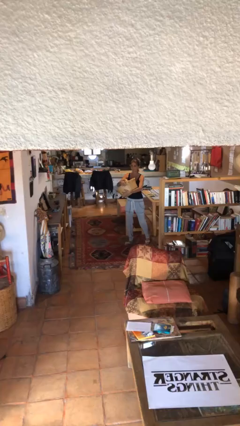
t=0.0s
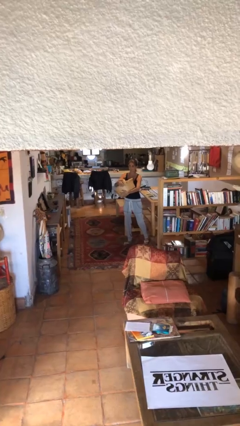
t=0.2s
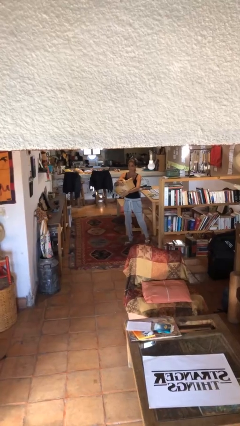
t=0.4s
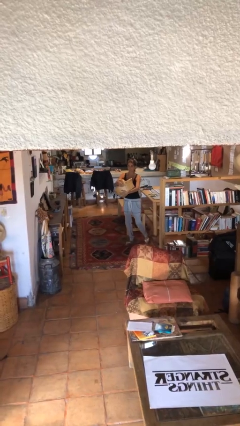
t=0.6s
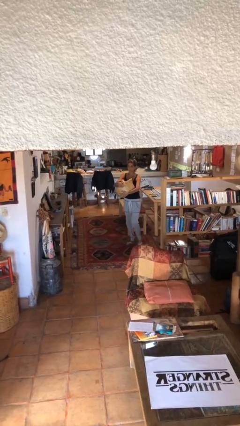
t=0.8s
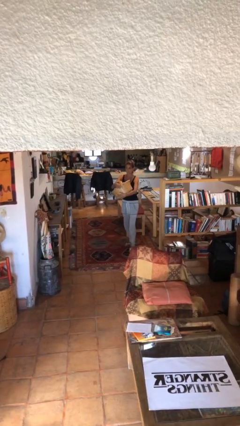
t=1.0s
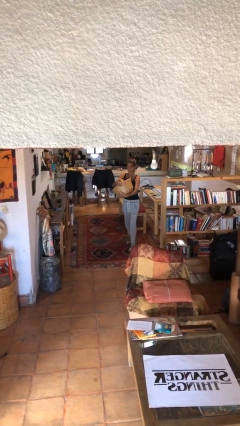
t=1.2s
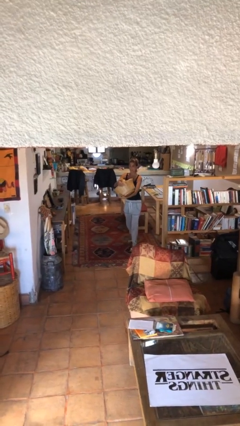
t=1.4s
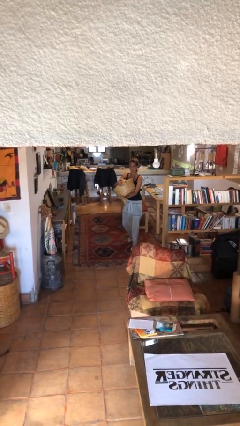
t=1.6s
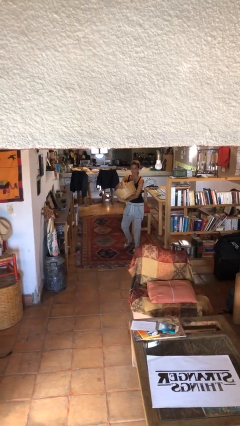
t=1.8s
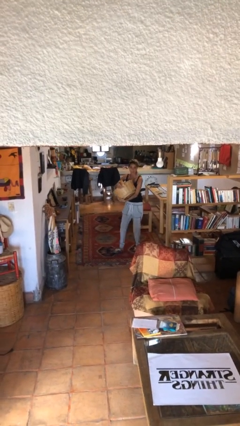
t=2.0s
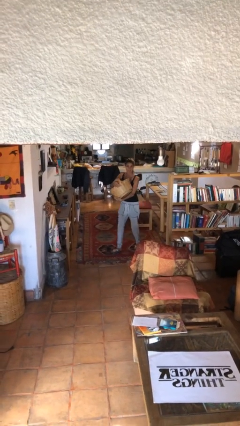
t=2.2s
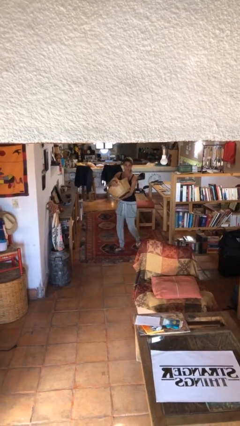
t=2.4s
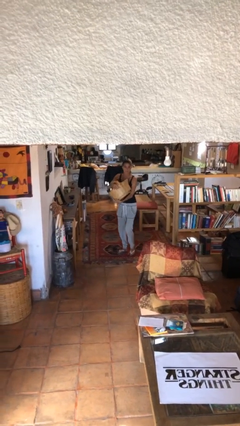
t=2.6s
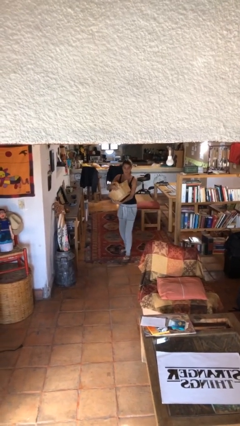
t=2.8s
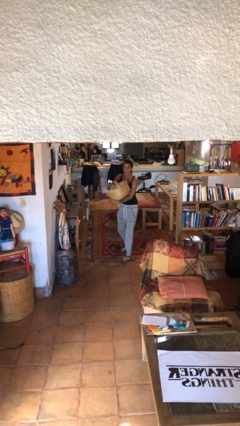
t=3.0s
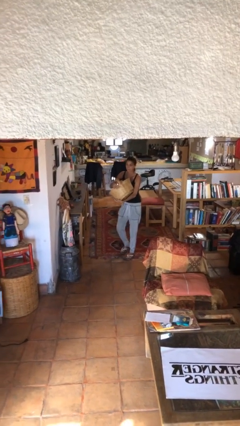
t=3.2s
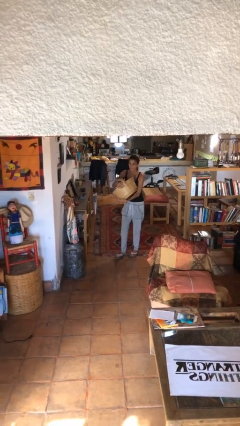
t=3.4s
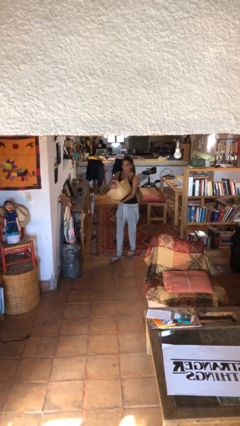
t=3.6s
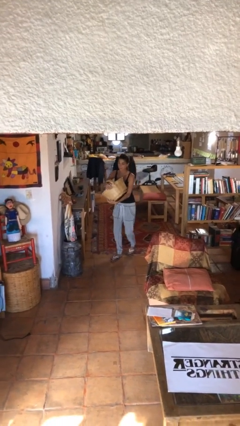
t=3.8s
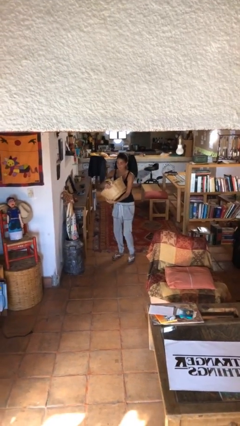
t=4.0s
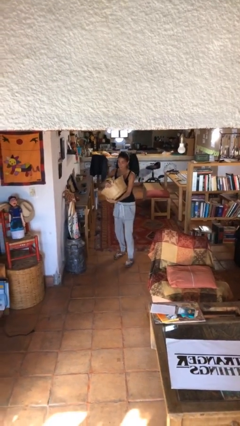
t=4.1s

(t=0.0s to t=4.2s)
person carries heavy object

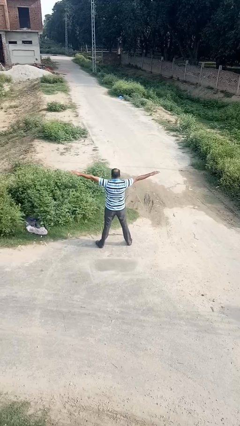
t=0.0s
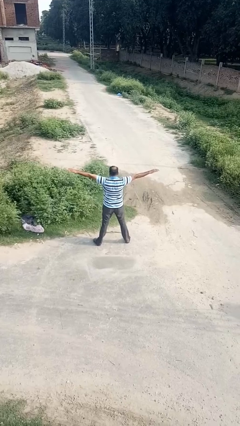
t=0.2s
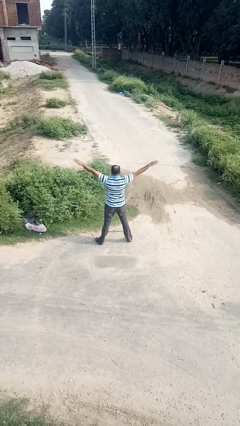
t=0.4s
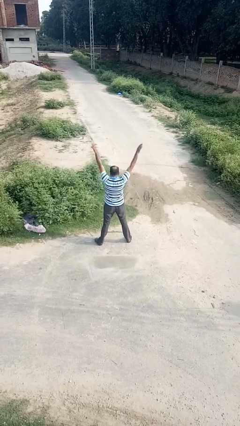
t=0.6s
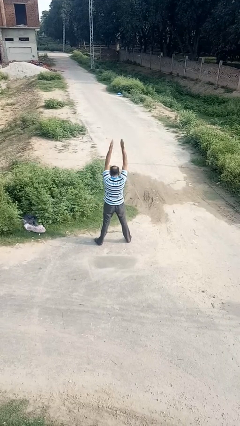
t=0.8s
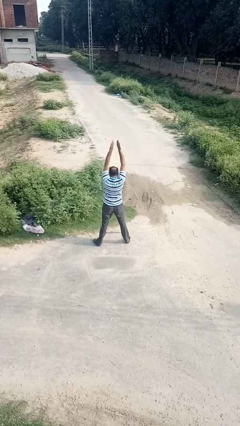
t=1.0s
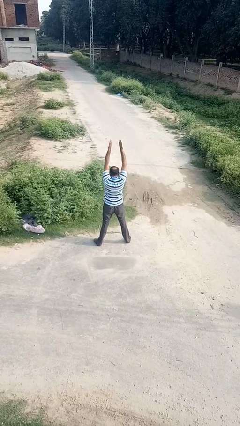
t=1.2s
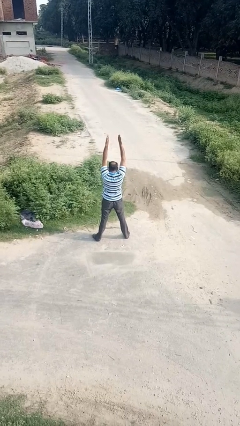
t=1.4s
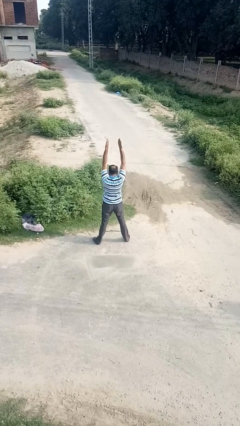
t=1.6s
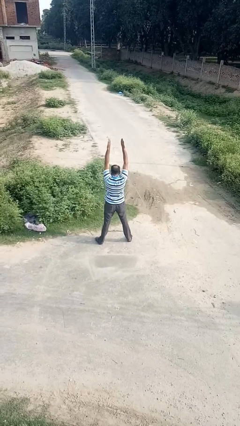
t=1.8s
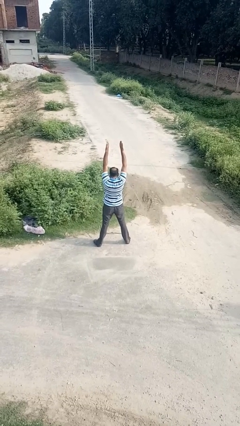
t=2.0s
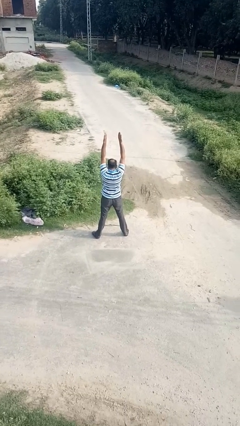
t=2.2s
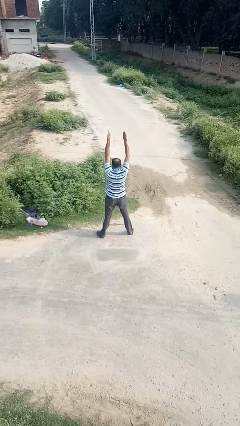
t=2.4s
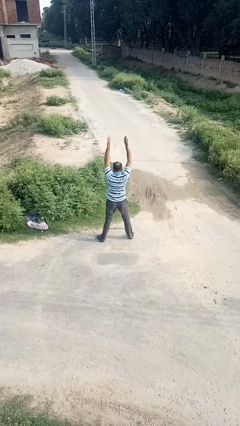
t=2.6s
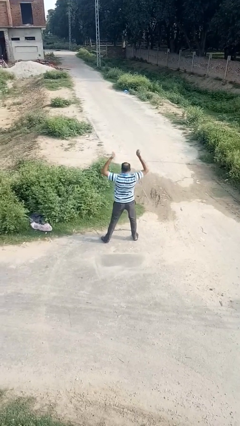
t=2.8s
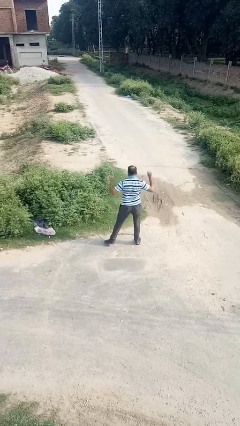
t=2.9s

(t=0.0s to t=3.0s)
person stretches arms over head

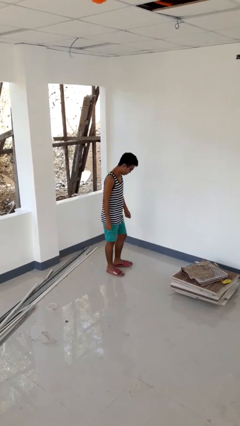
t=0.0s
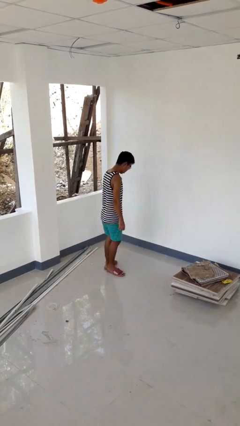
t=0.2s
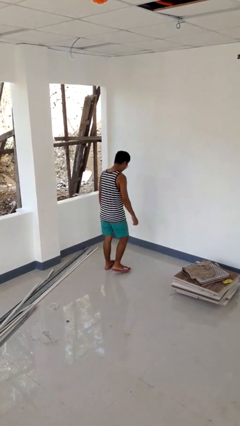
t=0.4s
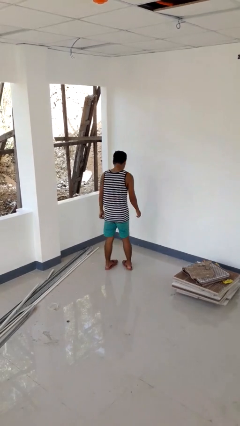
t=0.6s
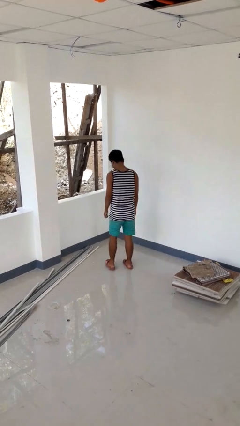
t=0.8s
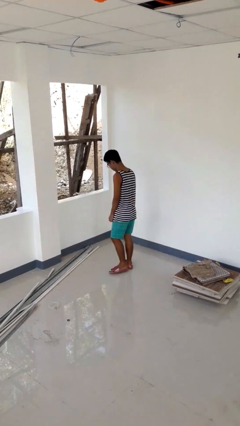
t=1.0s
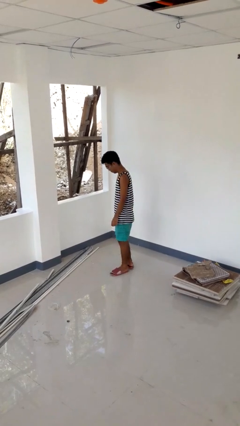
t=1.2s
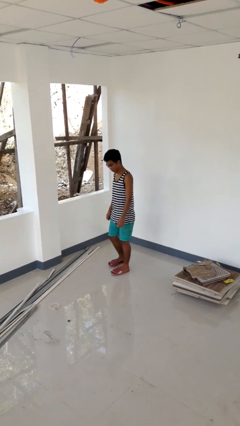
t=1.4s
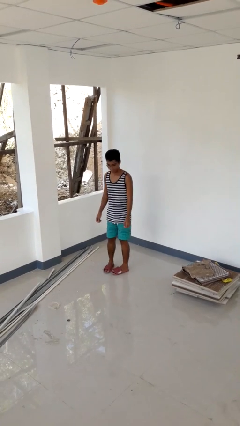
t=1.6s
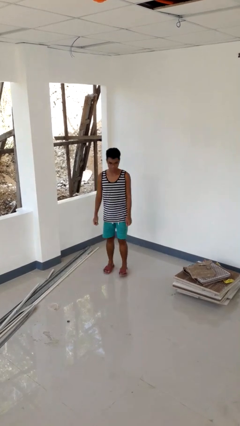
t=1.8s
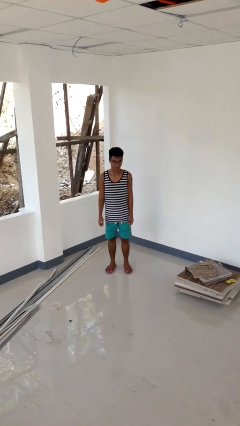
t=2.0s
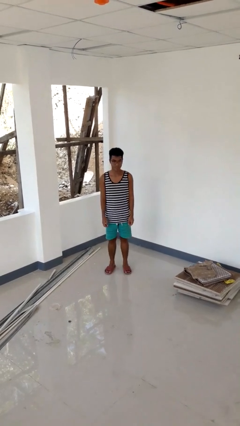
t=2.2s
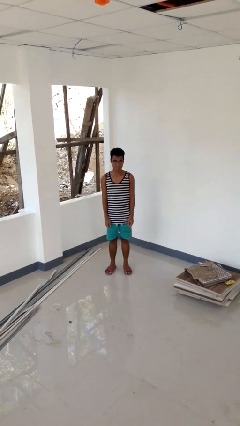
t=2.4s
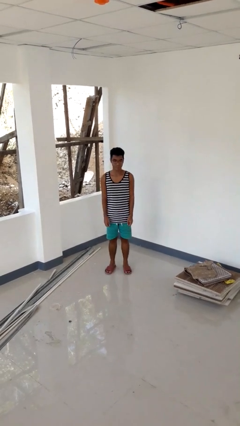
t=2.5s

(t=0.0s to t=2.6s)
person twirls

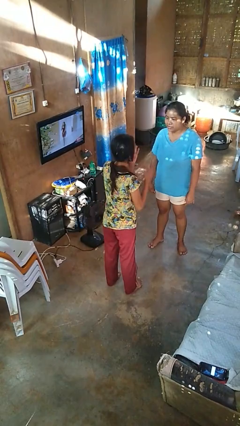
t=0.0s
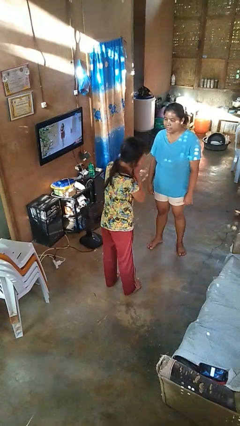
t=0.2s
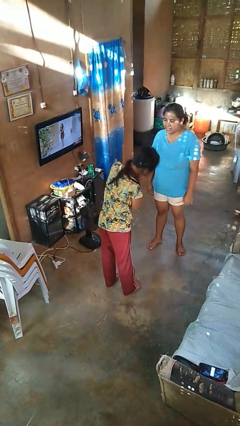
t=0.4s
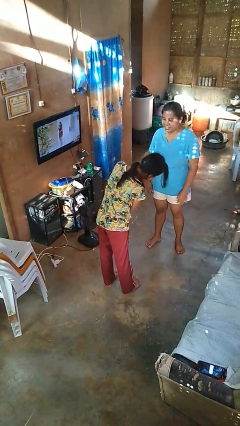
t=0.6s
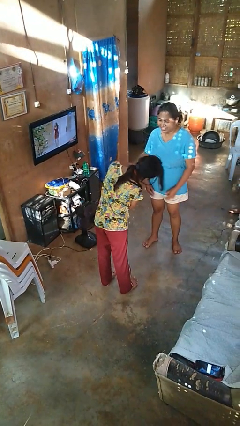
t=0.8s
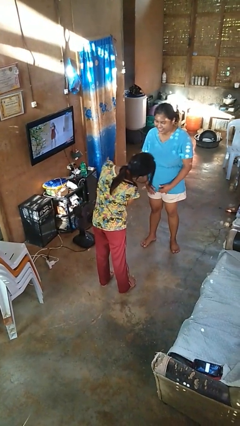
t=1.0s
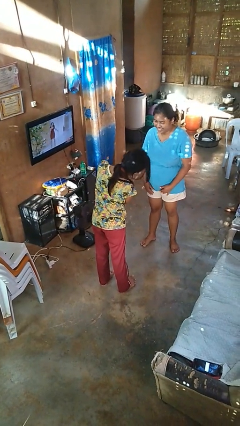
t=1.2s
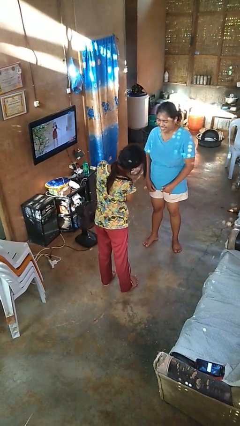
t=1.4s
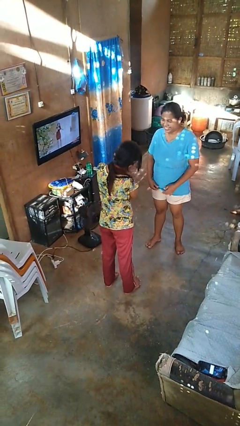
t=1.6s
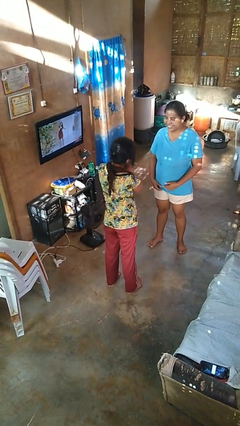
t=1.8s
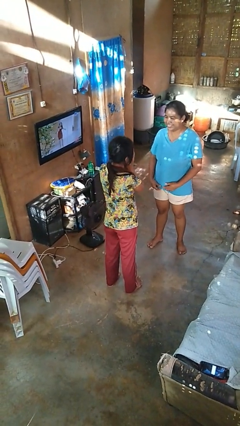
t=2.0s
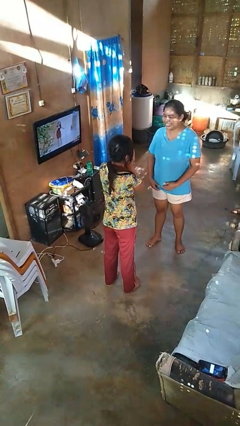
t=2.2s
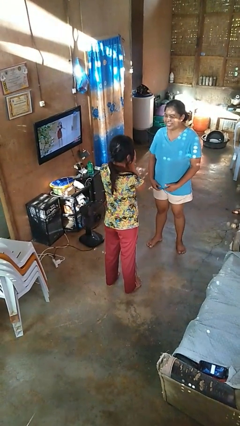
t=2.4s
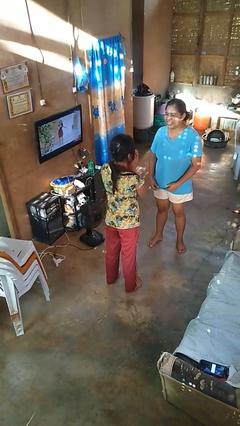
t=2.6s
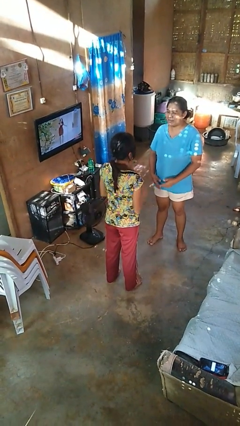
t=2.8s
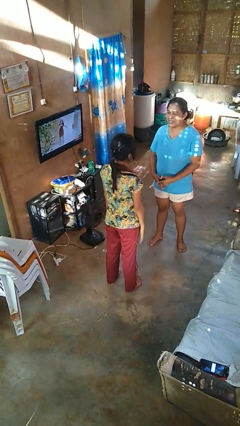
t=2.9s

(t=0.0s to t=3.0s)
person laughs with person

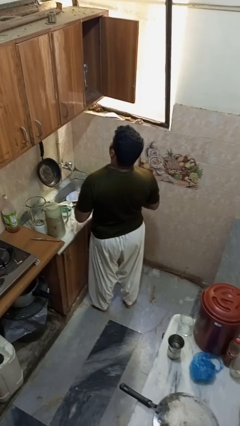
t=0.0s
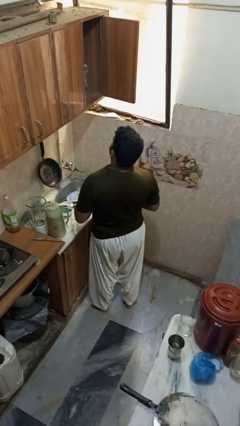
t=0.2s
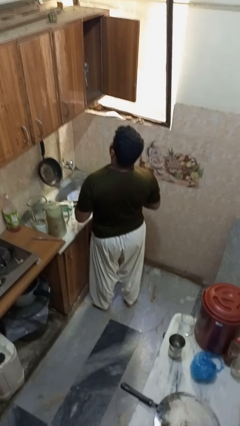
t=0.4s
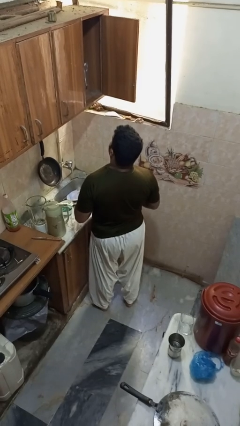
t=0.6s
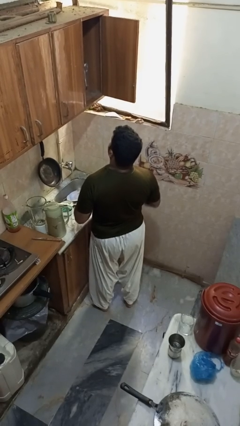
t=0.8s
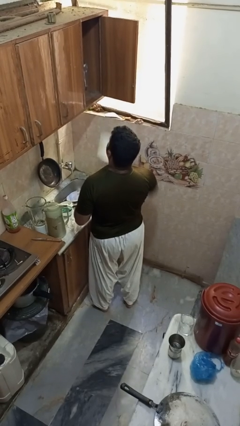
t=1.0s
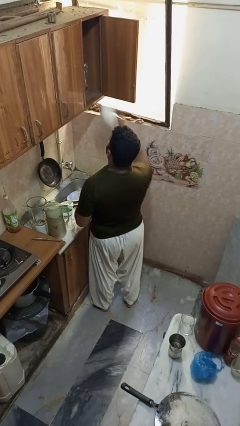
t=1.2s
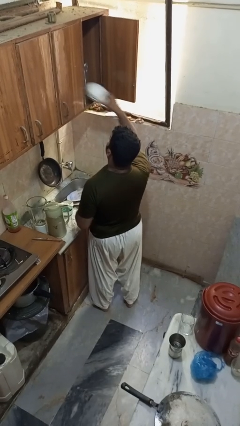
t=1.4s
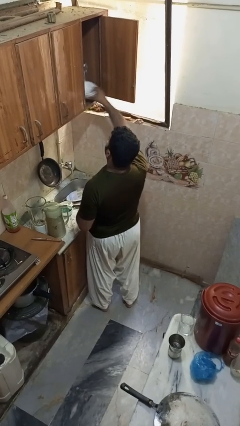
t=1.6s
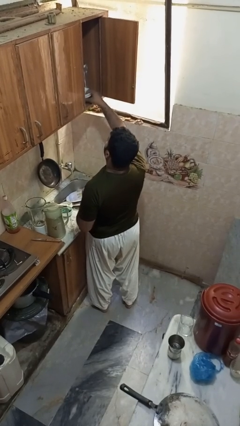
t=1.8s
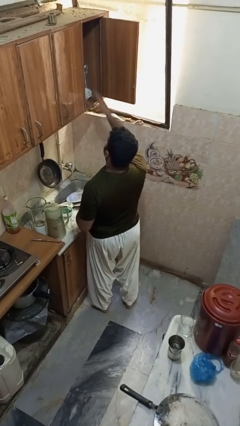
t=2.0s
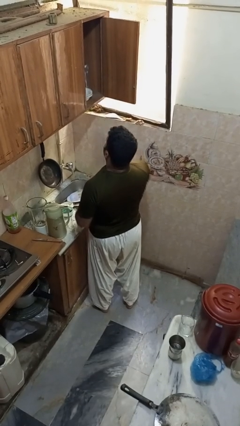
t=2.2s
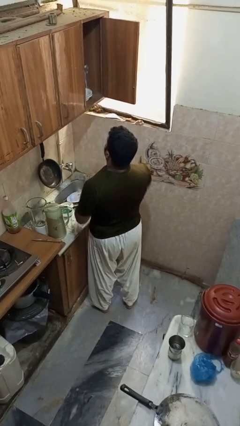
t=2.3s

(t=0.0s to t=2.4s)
person puts object in cabinet

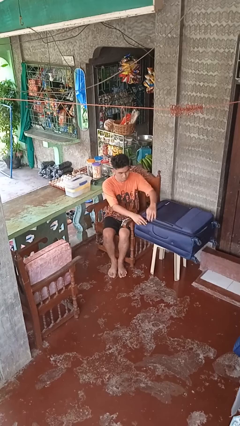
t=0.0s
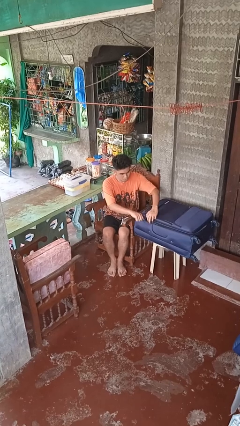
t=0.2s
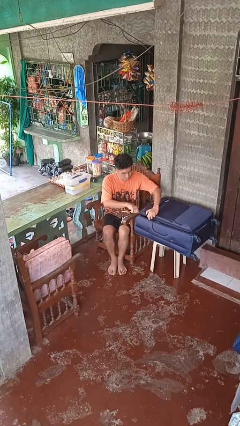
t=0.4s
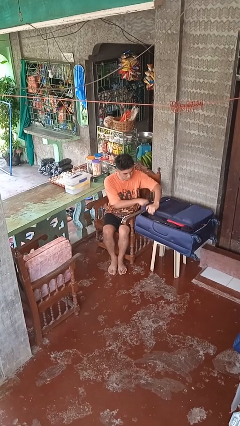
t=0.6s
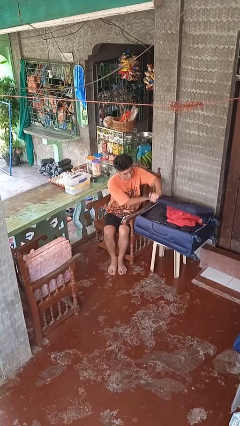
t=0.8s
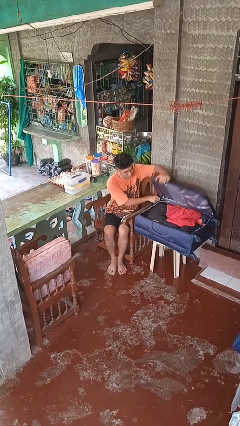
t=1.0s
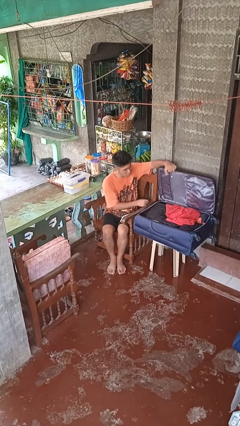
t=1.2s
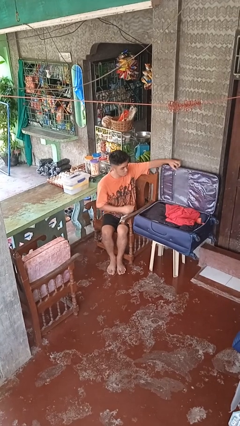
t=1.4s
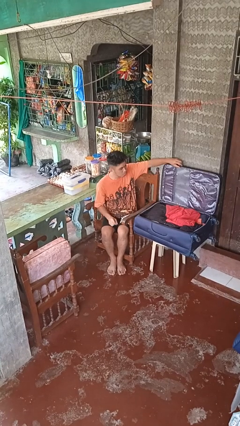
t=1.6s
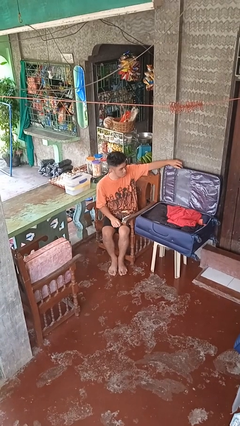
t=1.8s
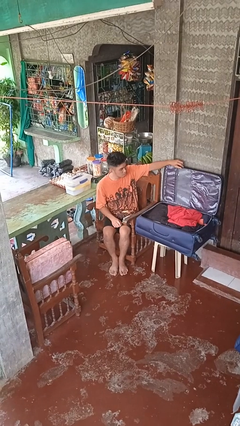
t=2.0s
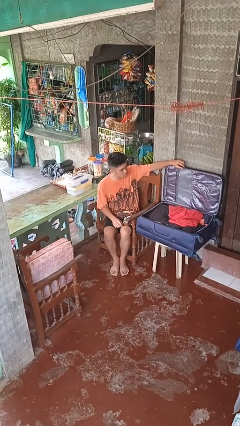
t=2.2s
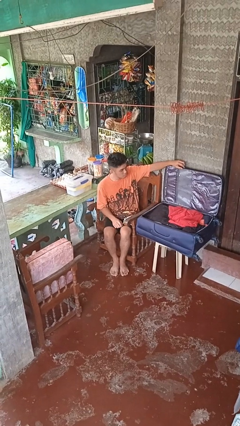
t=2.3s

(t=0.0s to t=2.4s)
person opens suitcase
